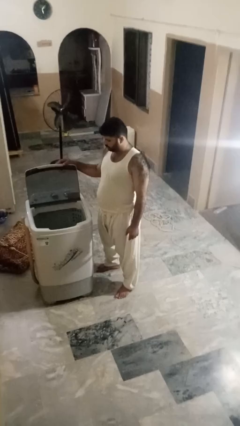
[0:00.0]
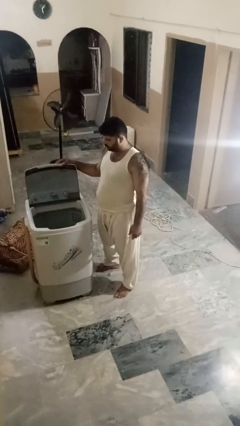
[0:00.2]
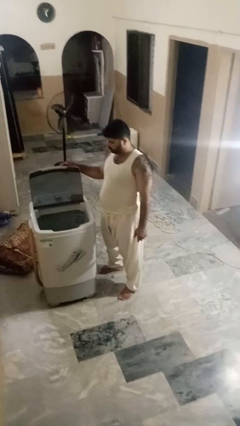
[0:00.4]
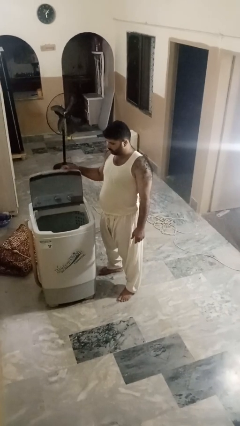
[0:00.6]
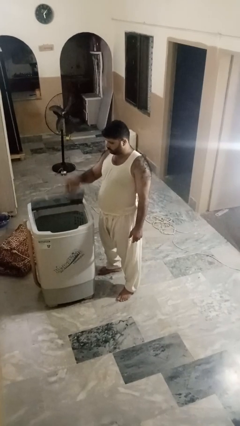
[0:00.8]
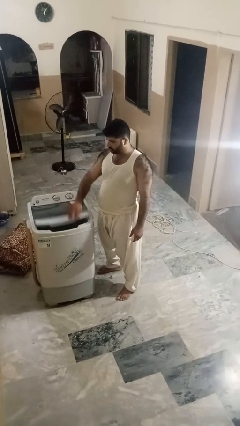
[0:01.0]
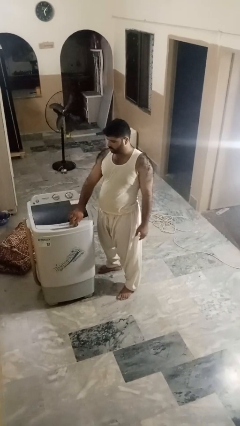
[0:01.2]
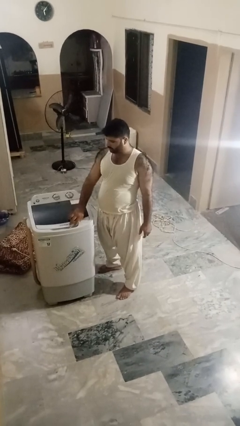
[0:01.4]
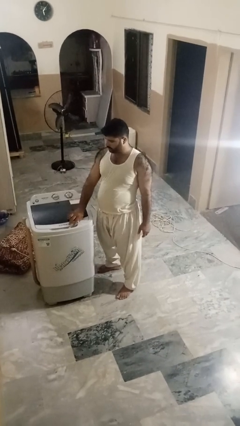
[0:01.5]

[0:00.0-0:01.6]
person closes clothes washer

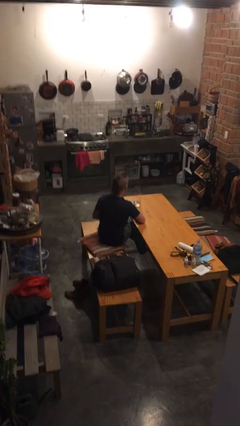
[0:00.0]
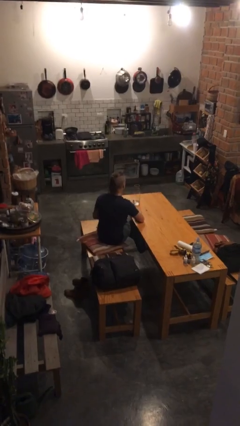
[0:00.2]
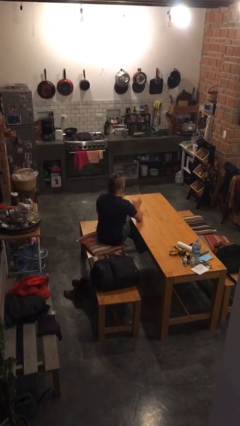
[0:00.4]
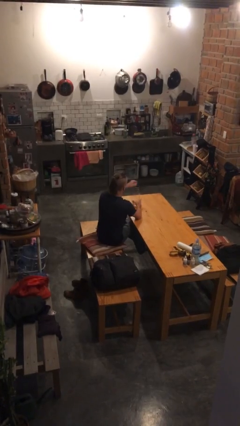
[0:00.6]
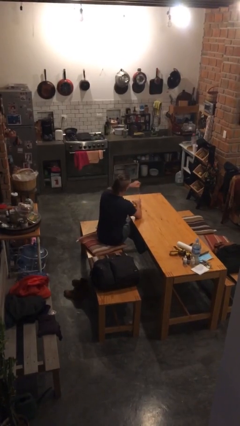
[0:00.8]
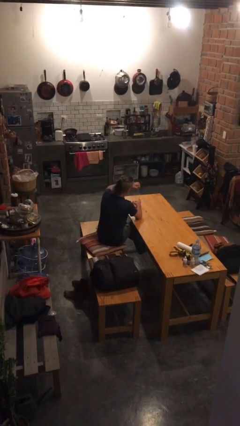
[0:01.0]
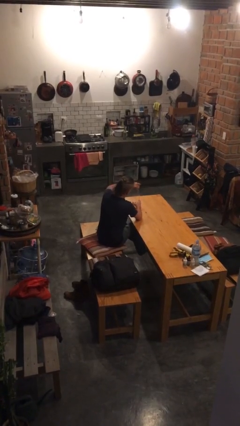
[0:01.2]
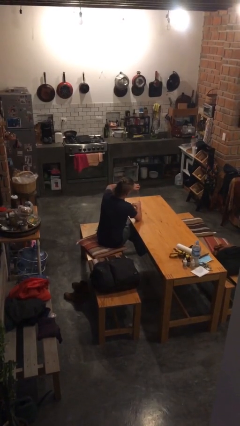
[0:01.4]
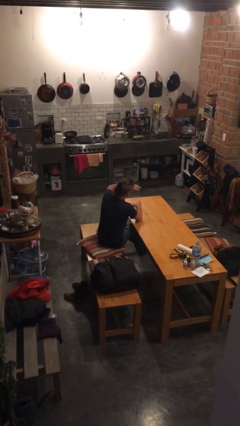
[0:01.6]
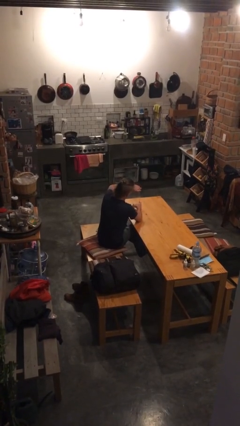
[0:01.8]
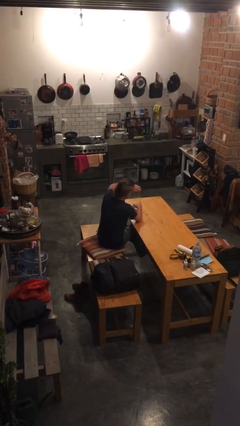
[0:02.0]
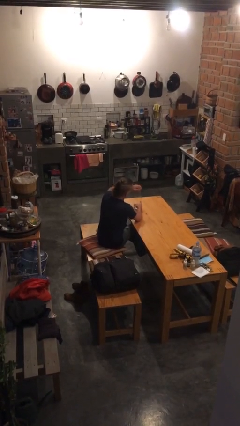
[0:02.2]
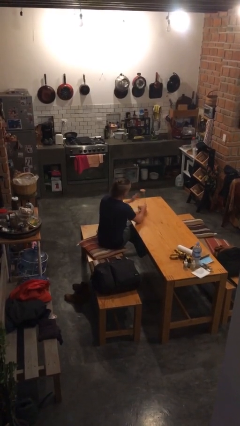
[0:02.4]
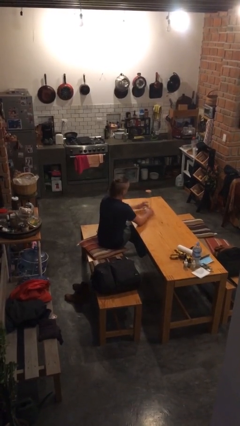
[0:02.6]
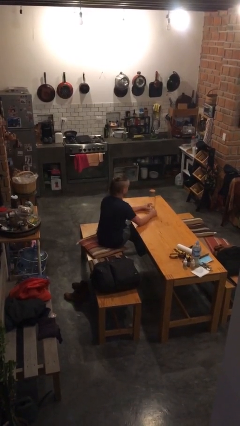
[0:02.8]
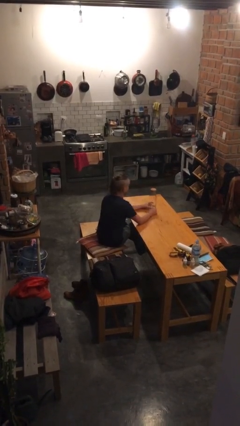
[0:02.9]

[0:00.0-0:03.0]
person closes jar

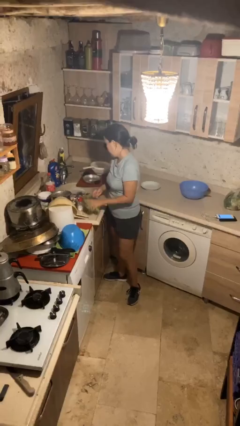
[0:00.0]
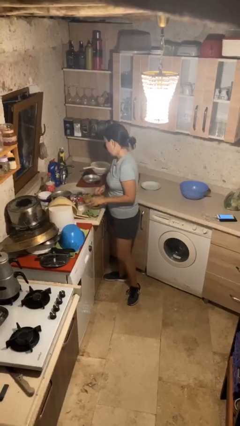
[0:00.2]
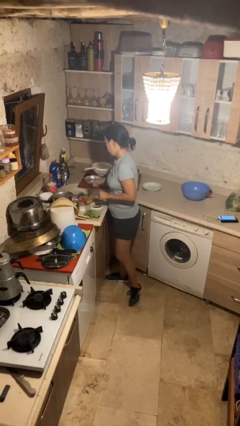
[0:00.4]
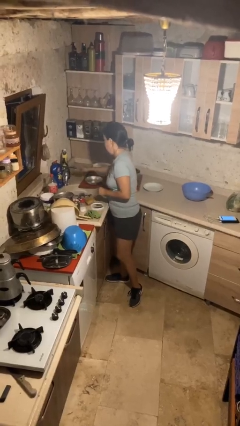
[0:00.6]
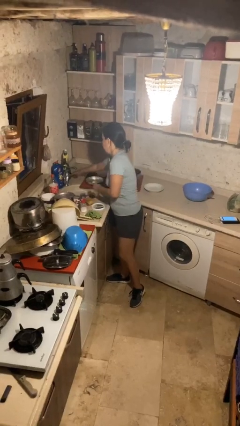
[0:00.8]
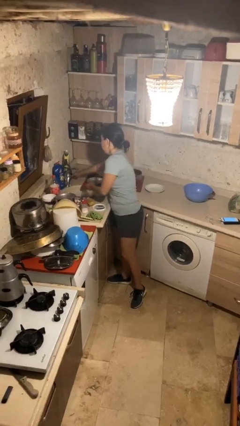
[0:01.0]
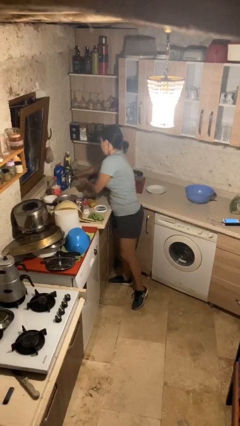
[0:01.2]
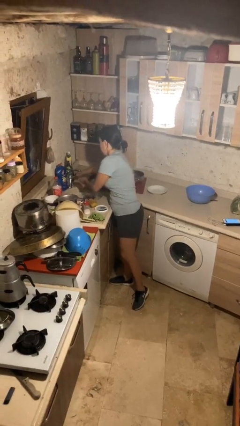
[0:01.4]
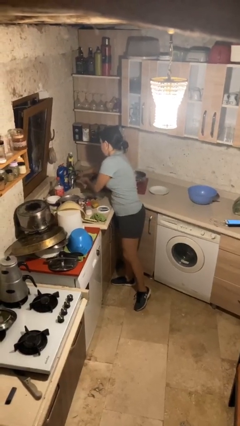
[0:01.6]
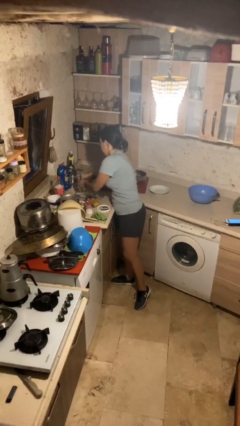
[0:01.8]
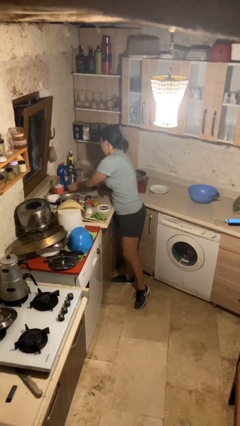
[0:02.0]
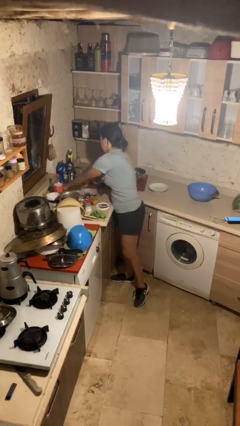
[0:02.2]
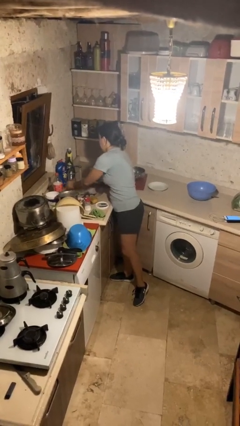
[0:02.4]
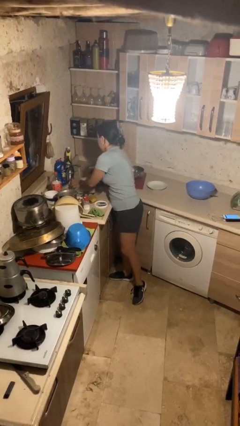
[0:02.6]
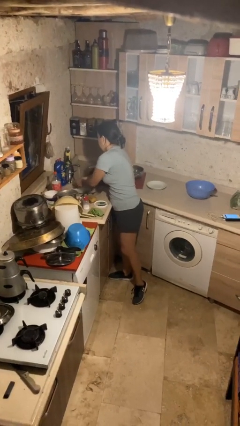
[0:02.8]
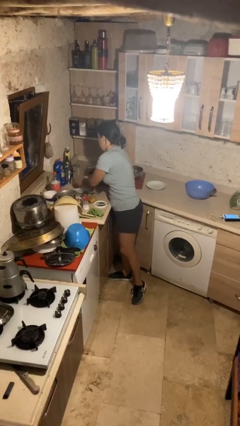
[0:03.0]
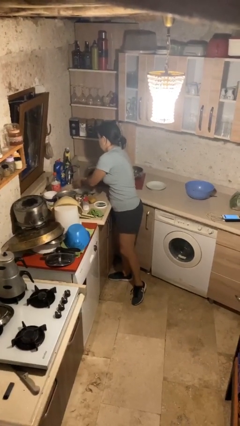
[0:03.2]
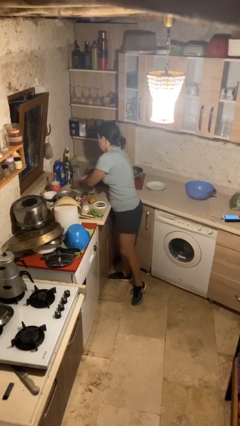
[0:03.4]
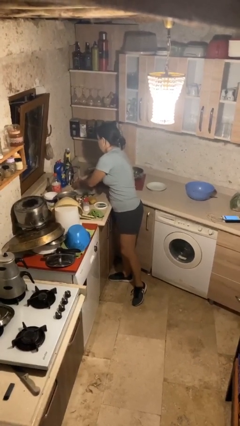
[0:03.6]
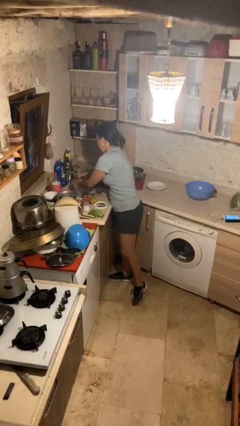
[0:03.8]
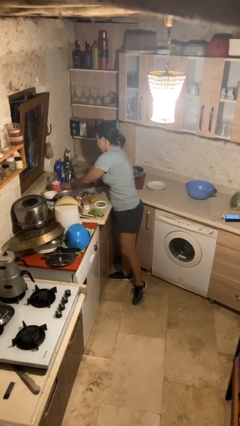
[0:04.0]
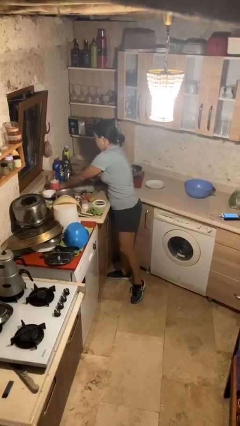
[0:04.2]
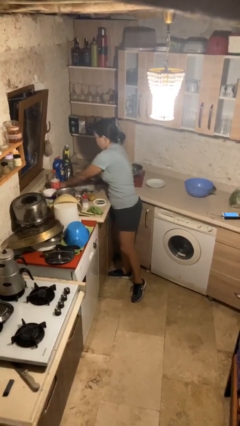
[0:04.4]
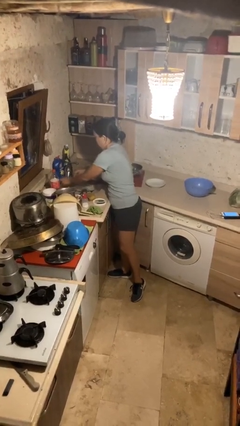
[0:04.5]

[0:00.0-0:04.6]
person washes hands

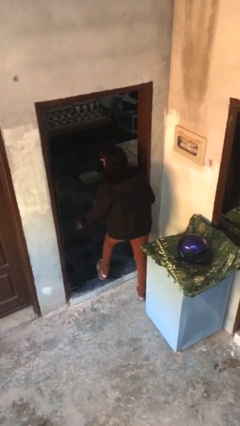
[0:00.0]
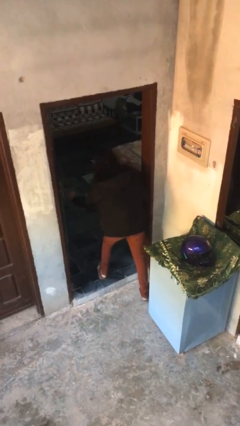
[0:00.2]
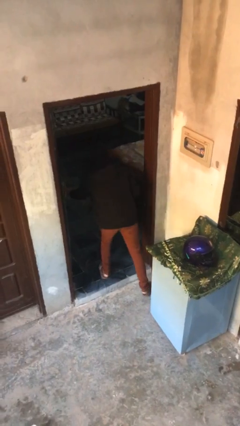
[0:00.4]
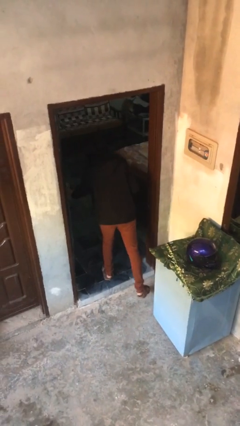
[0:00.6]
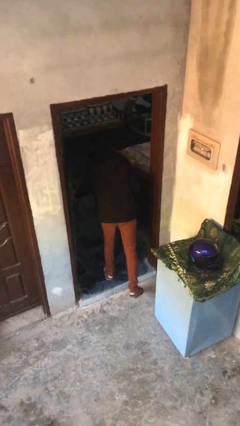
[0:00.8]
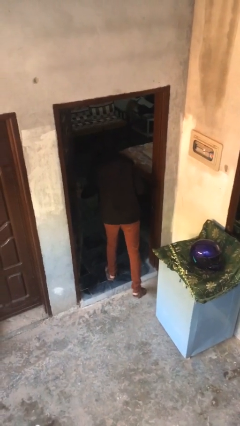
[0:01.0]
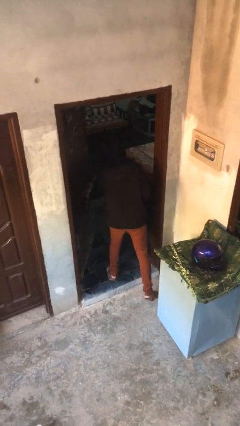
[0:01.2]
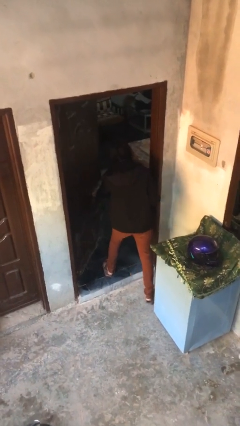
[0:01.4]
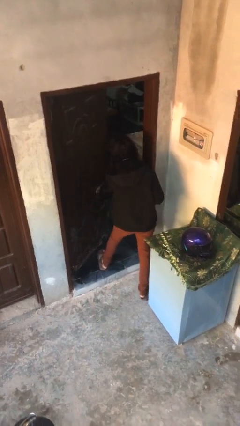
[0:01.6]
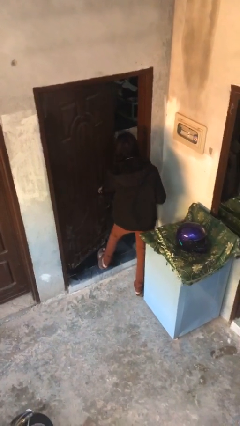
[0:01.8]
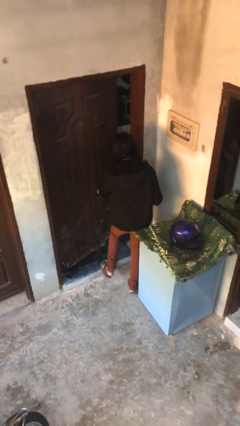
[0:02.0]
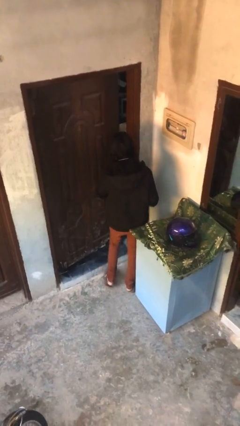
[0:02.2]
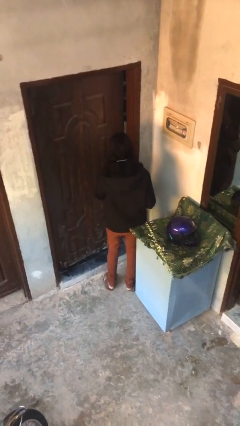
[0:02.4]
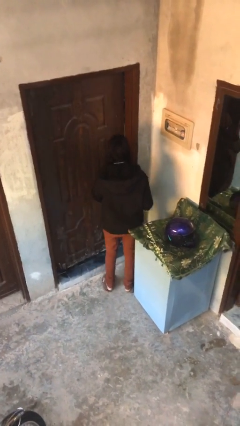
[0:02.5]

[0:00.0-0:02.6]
person closes facility door

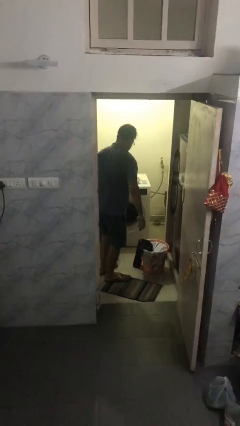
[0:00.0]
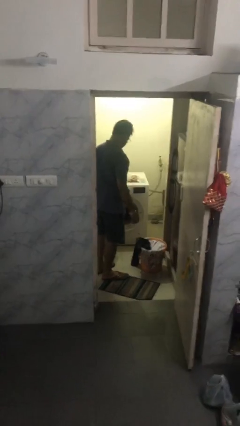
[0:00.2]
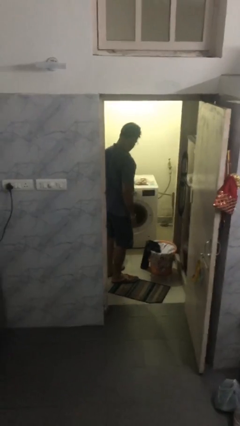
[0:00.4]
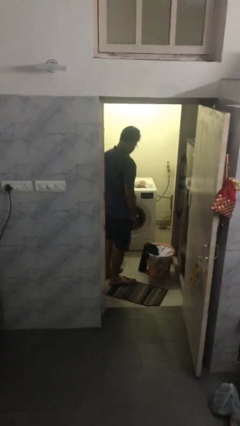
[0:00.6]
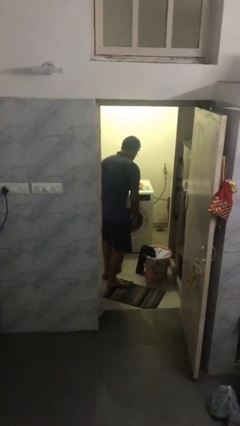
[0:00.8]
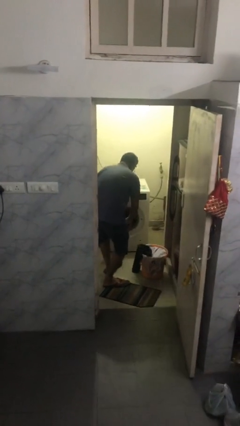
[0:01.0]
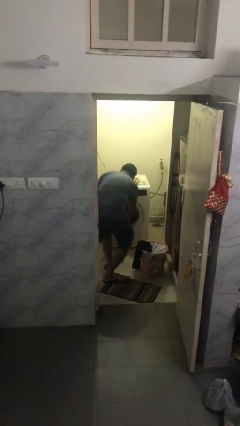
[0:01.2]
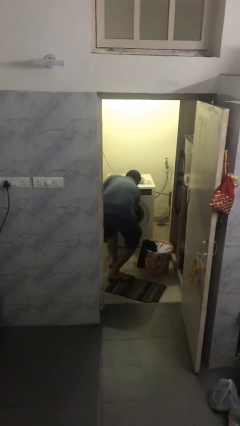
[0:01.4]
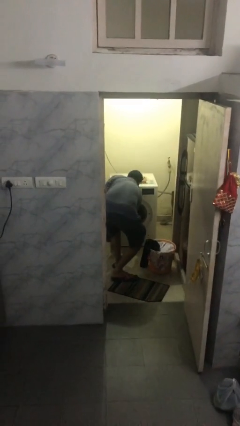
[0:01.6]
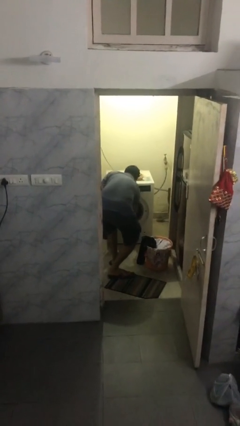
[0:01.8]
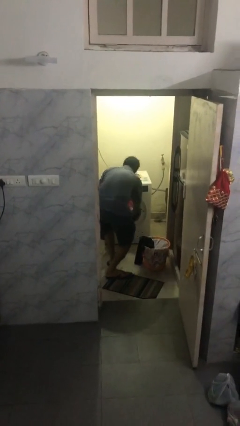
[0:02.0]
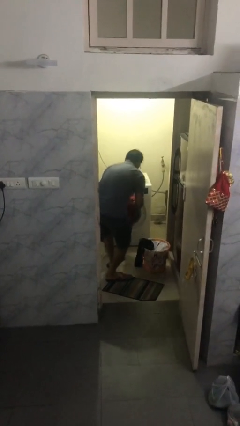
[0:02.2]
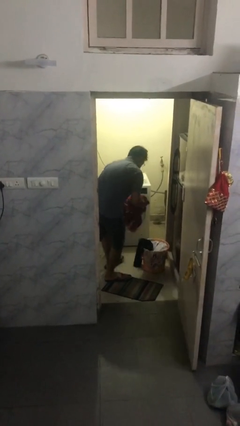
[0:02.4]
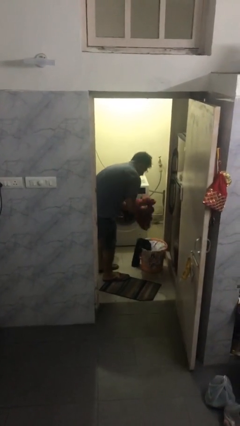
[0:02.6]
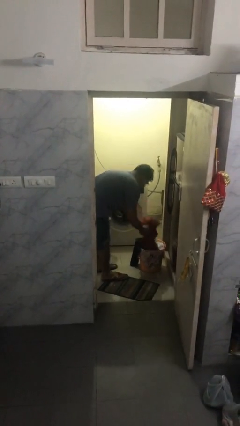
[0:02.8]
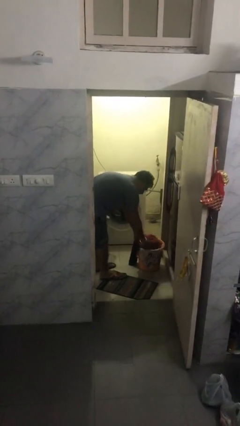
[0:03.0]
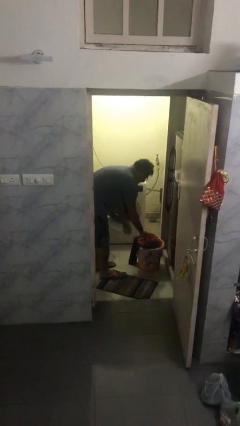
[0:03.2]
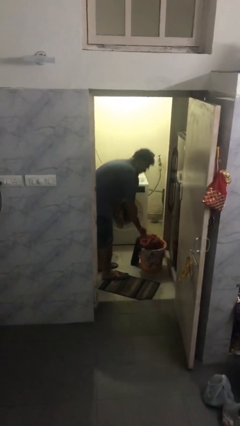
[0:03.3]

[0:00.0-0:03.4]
person unloads dryer

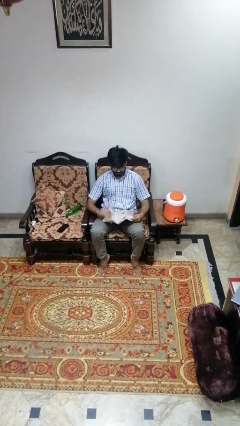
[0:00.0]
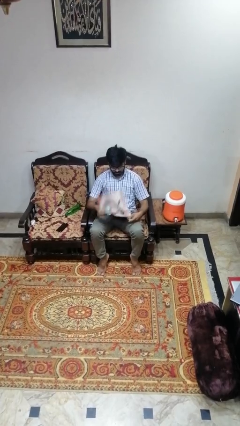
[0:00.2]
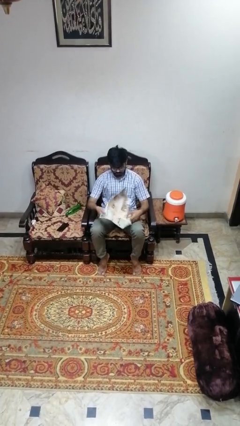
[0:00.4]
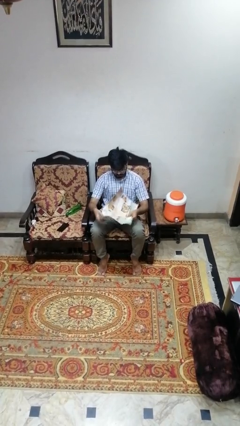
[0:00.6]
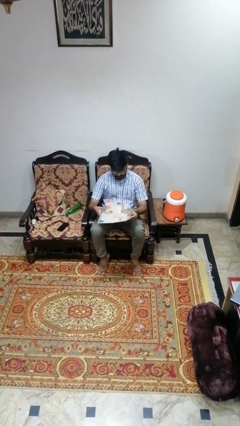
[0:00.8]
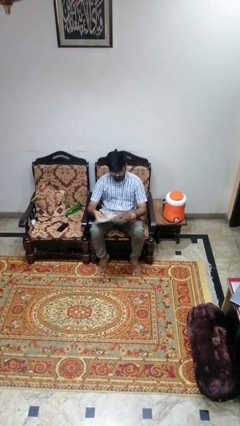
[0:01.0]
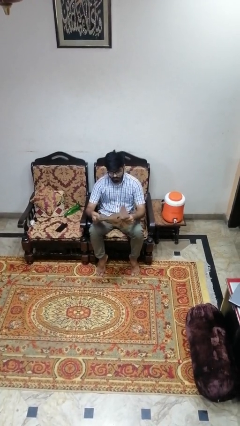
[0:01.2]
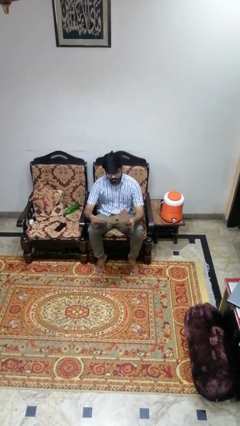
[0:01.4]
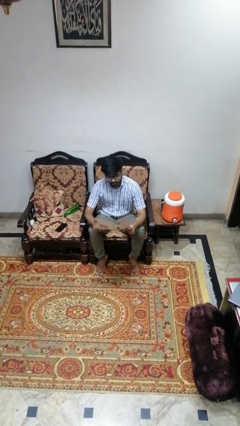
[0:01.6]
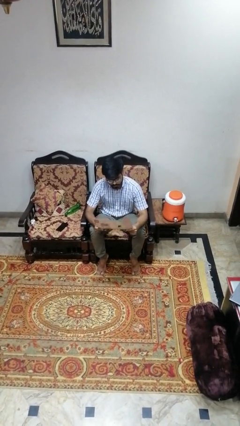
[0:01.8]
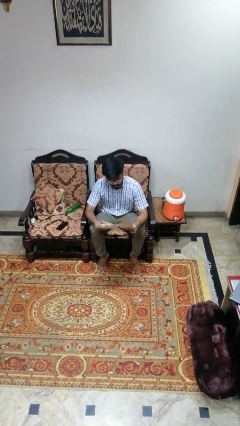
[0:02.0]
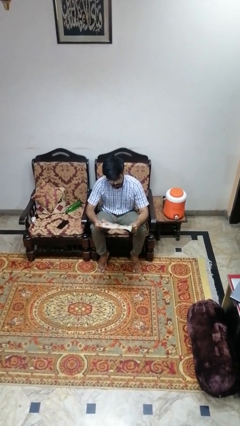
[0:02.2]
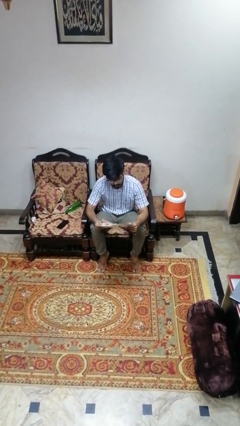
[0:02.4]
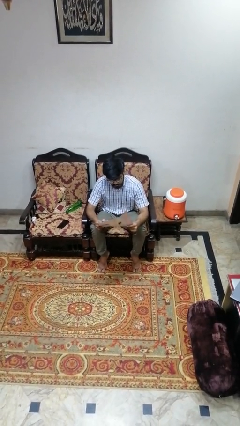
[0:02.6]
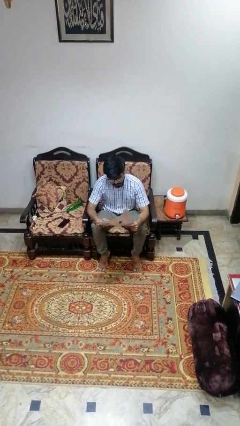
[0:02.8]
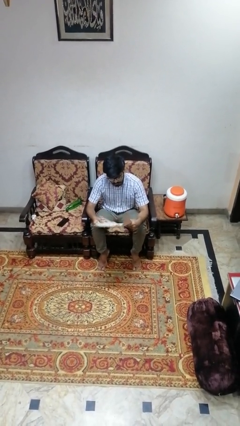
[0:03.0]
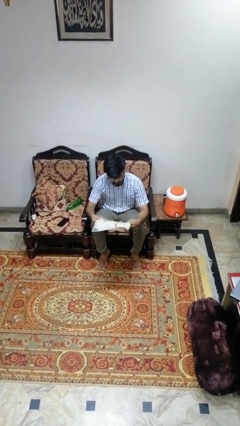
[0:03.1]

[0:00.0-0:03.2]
person reads newspaper
